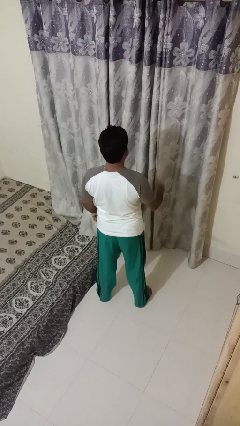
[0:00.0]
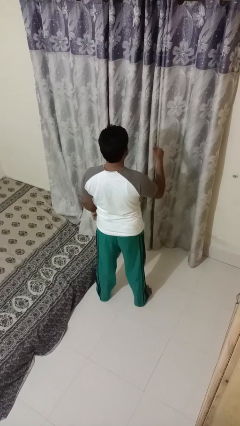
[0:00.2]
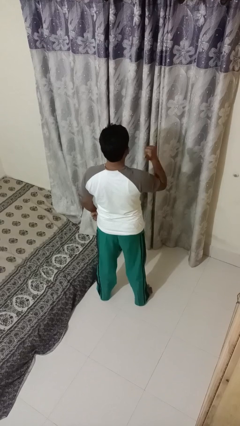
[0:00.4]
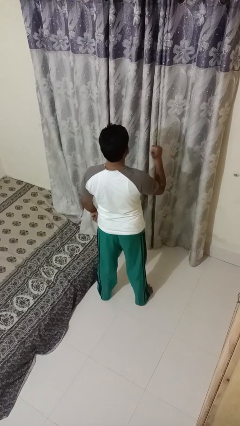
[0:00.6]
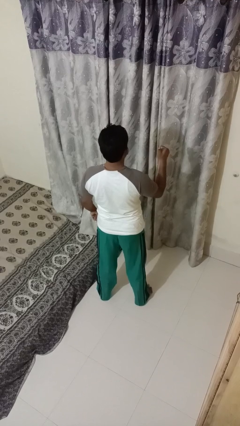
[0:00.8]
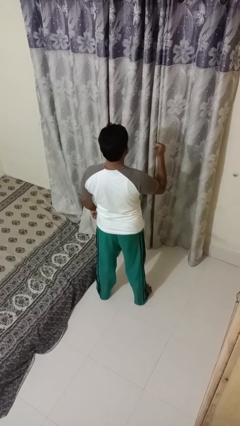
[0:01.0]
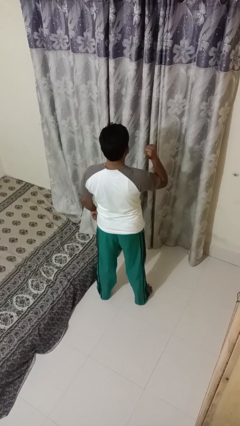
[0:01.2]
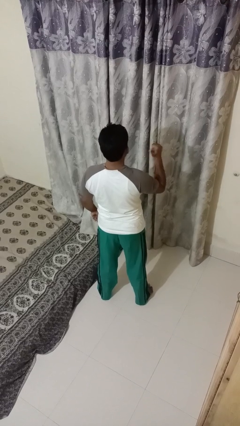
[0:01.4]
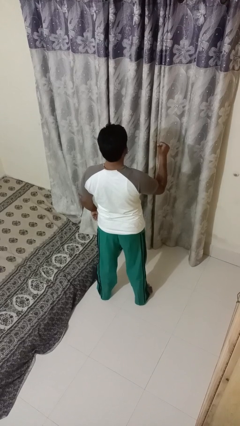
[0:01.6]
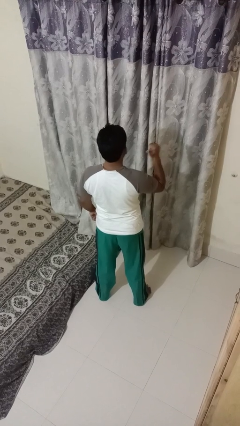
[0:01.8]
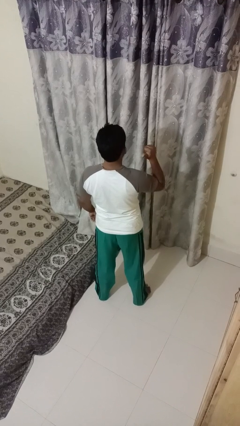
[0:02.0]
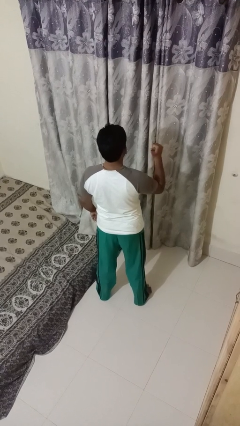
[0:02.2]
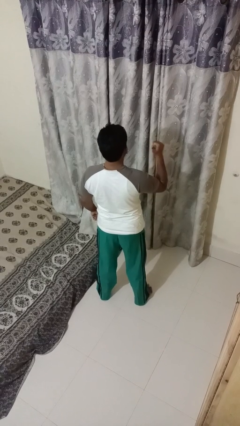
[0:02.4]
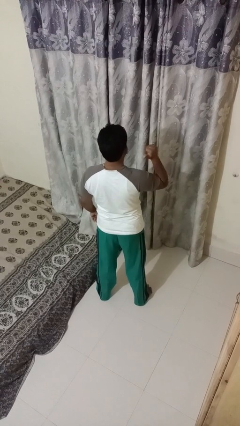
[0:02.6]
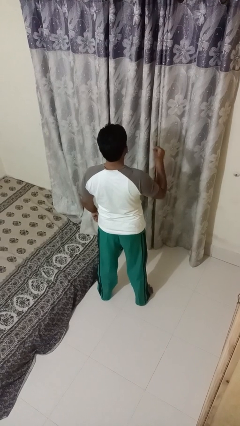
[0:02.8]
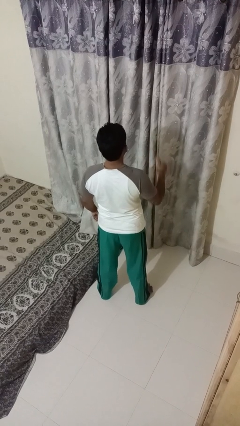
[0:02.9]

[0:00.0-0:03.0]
person gestures behind me

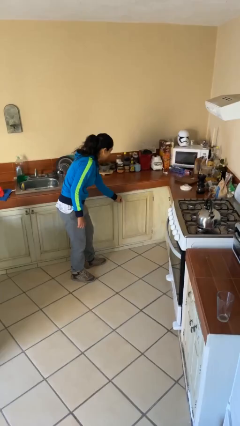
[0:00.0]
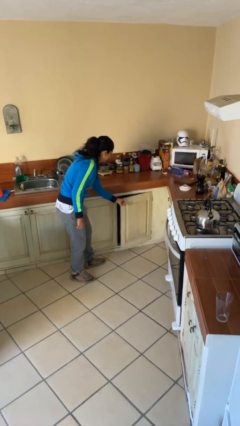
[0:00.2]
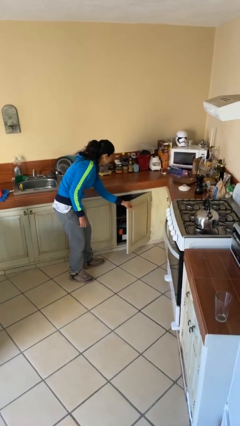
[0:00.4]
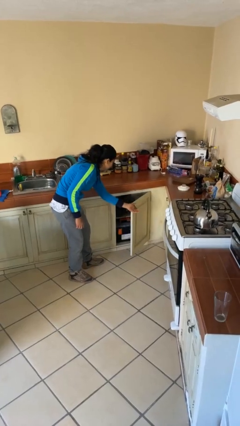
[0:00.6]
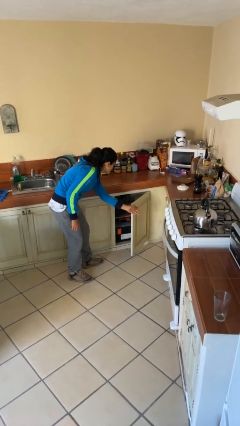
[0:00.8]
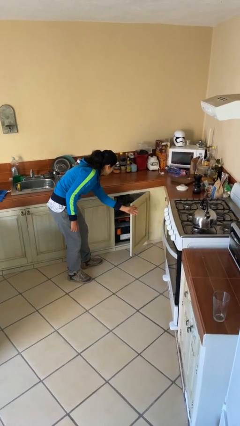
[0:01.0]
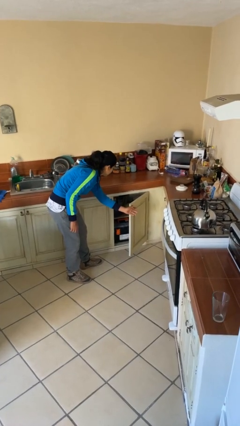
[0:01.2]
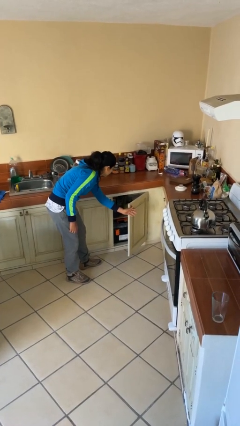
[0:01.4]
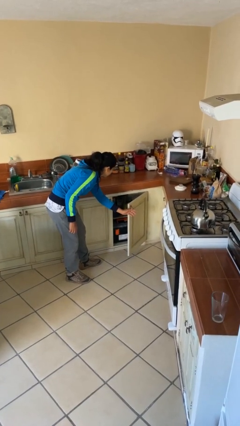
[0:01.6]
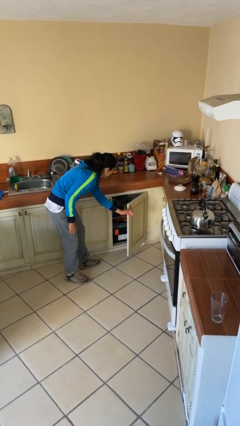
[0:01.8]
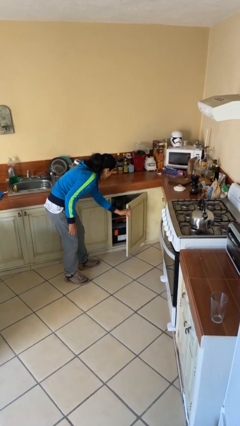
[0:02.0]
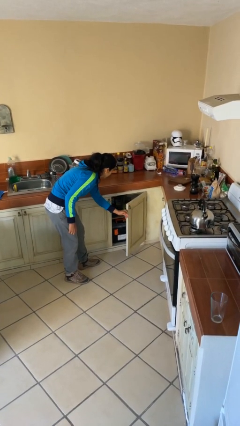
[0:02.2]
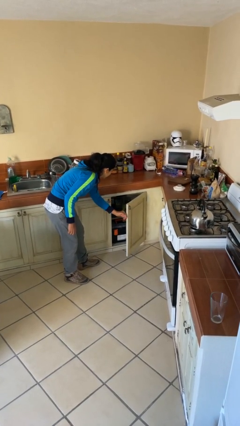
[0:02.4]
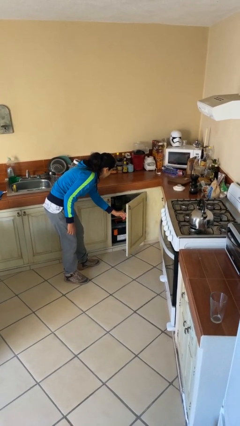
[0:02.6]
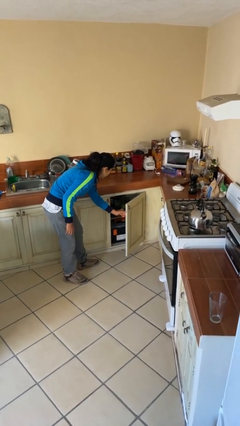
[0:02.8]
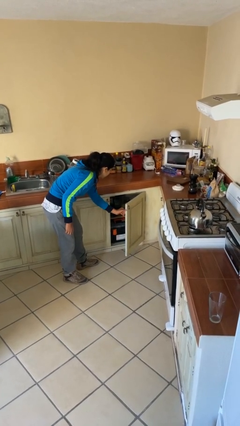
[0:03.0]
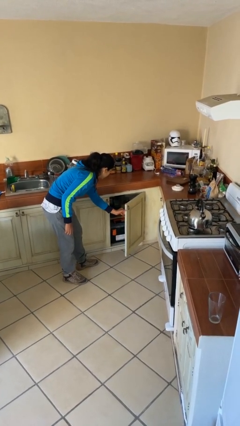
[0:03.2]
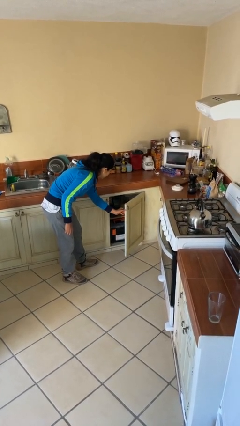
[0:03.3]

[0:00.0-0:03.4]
person opens cabinet

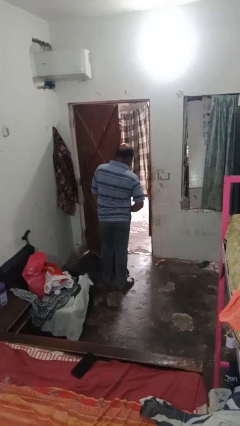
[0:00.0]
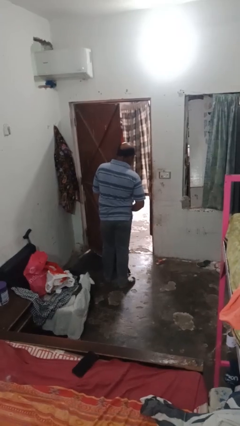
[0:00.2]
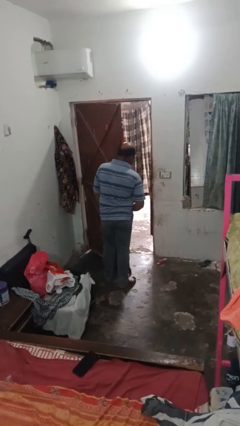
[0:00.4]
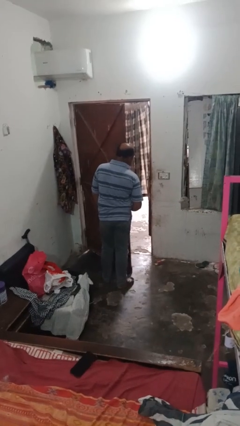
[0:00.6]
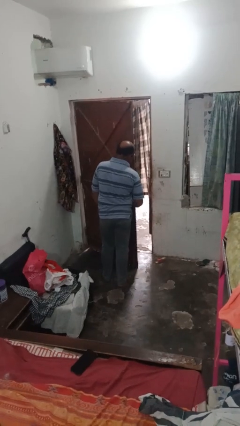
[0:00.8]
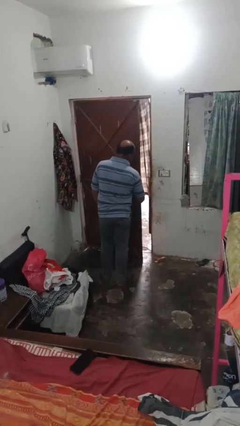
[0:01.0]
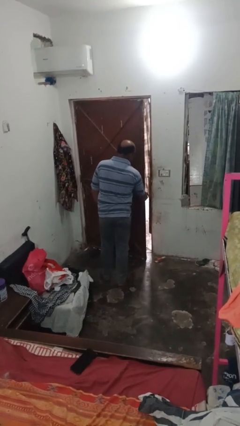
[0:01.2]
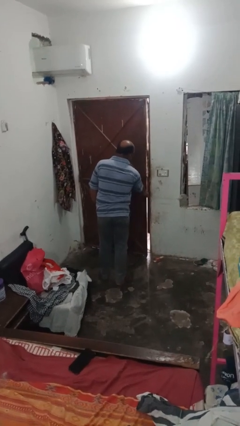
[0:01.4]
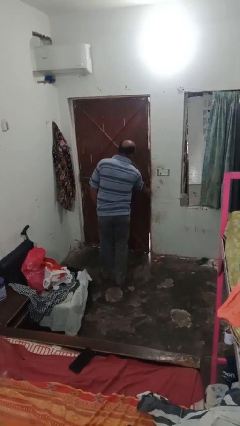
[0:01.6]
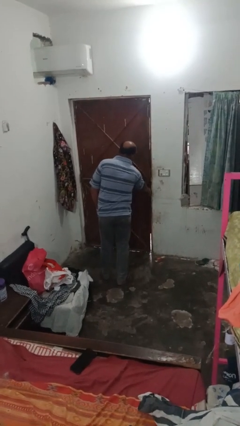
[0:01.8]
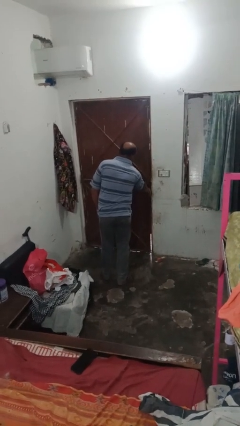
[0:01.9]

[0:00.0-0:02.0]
person closes closet door

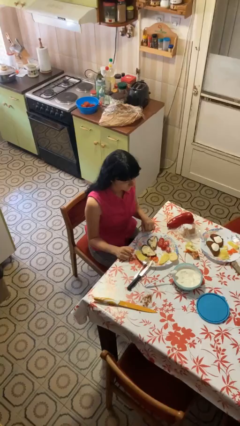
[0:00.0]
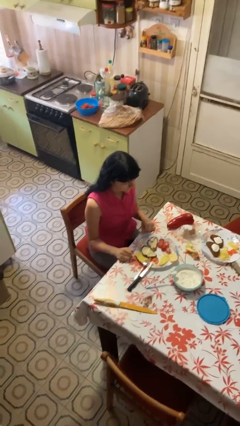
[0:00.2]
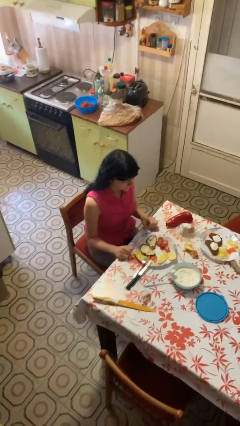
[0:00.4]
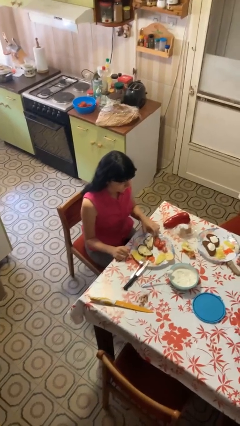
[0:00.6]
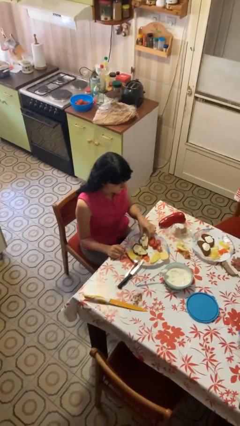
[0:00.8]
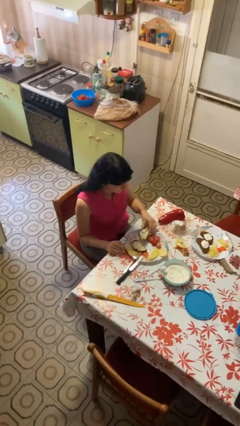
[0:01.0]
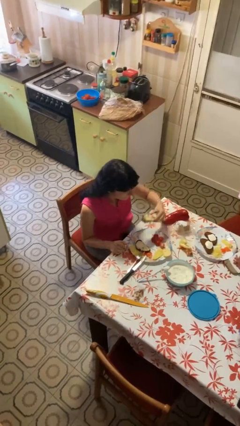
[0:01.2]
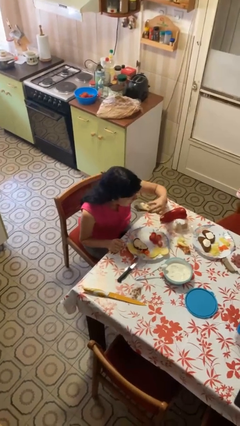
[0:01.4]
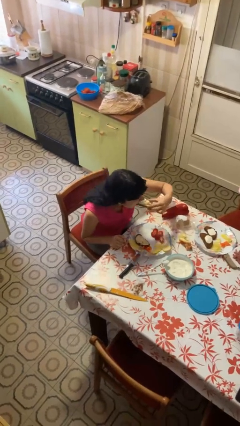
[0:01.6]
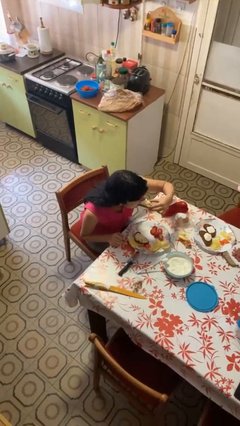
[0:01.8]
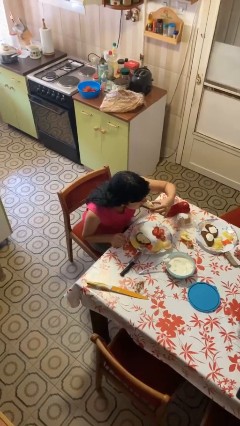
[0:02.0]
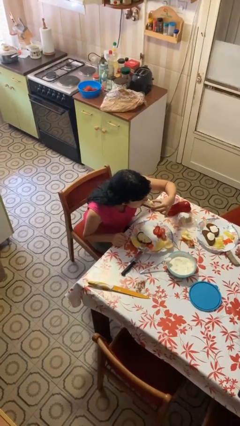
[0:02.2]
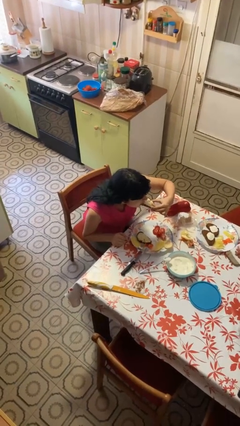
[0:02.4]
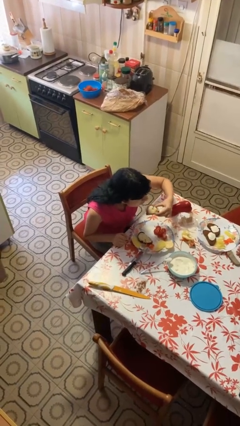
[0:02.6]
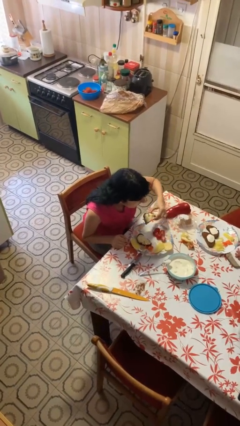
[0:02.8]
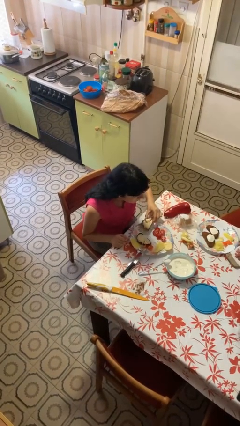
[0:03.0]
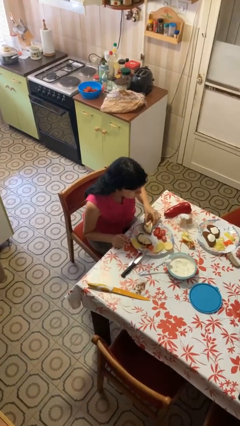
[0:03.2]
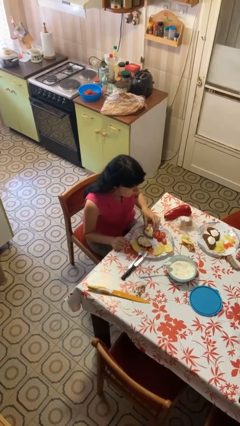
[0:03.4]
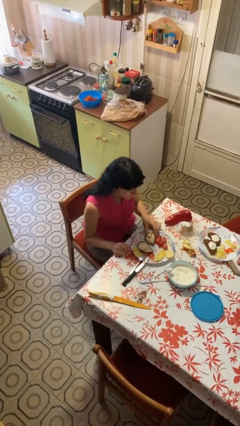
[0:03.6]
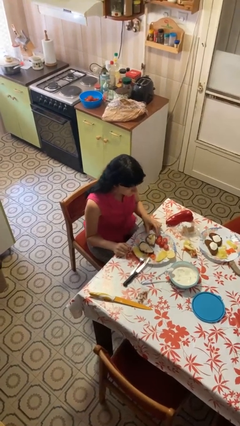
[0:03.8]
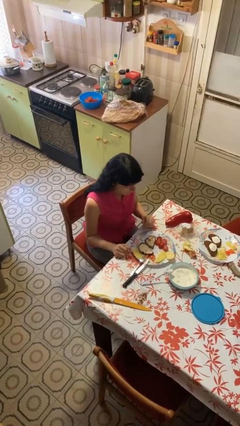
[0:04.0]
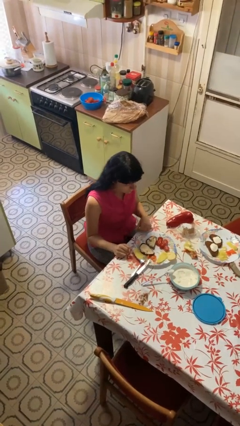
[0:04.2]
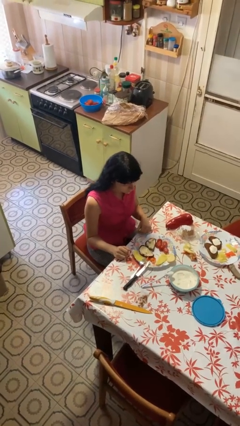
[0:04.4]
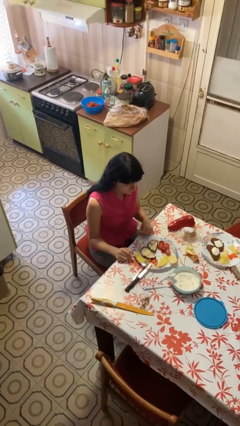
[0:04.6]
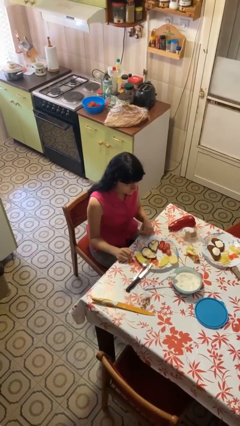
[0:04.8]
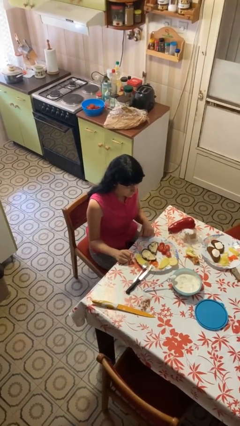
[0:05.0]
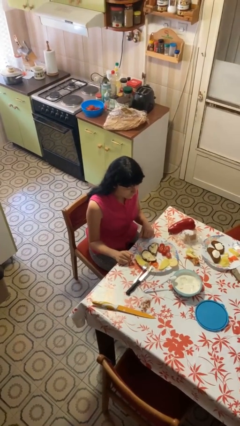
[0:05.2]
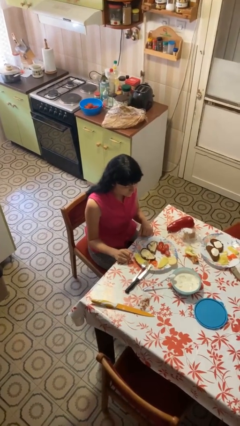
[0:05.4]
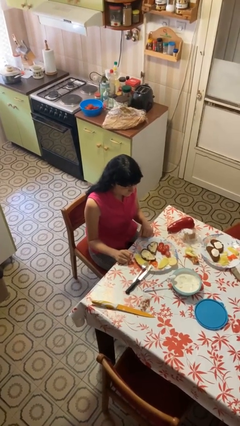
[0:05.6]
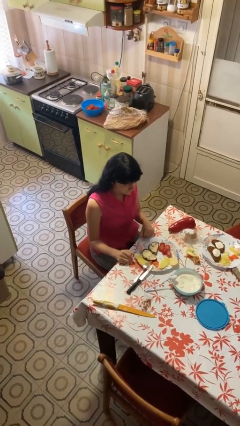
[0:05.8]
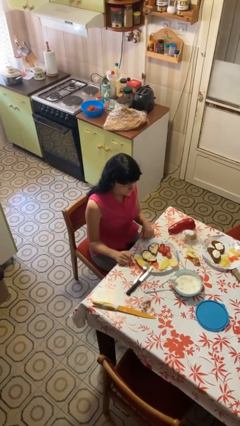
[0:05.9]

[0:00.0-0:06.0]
person eats with hands

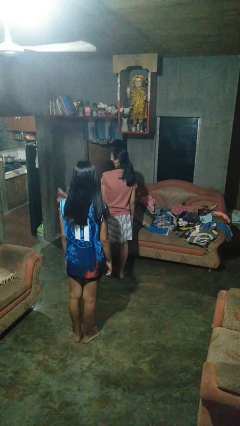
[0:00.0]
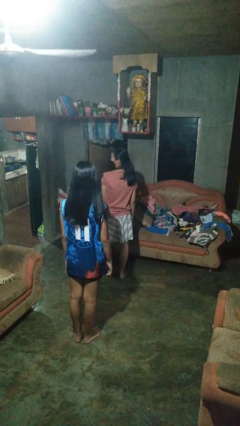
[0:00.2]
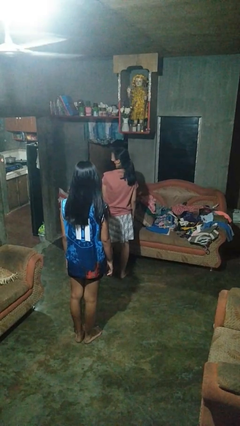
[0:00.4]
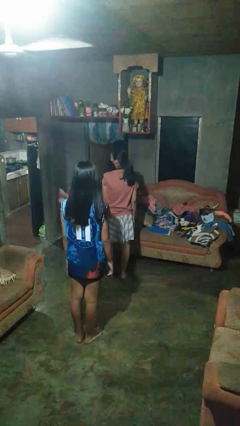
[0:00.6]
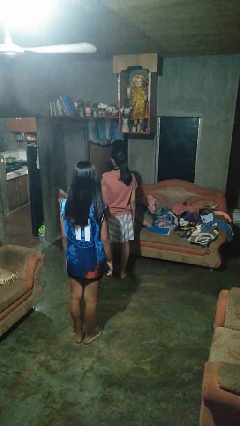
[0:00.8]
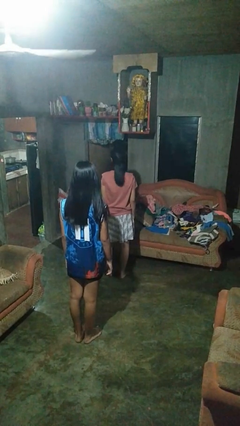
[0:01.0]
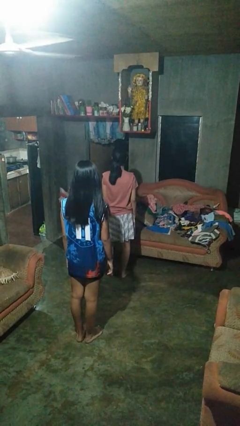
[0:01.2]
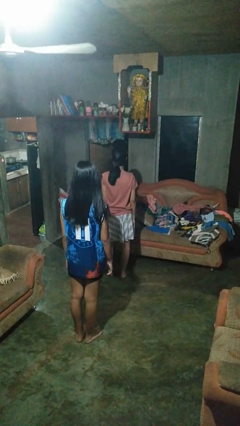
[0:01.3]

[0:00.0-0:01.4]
person looks over shoulder

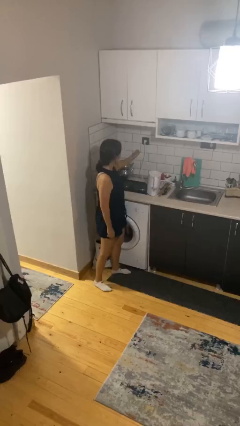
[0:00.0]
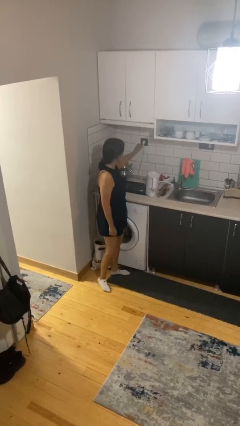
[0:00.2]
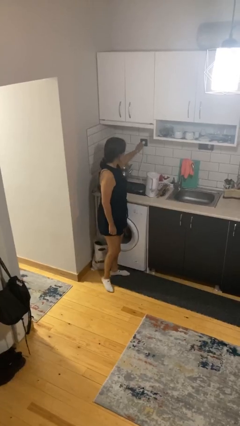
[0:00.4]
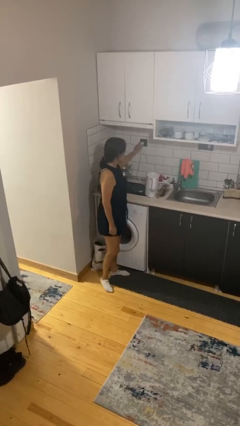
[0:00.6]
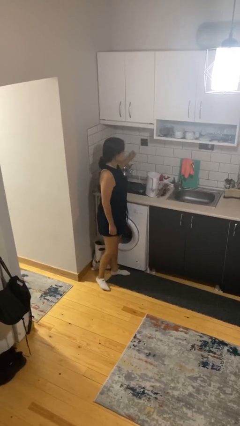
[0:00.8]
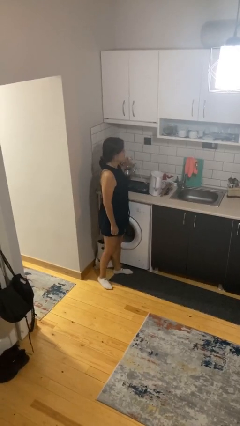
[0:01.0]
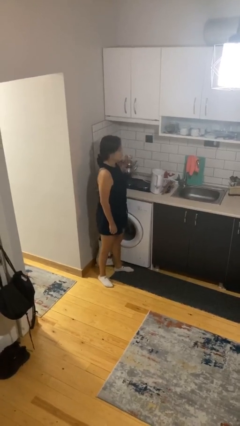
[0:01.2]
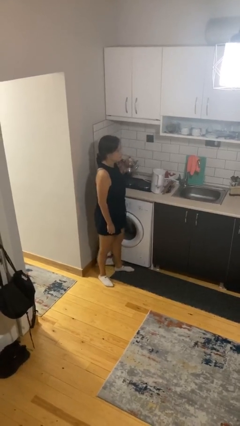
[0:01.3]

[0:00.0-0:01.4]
person unplugs from electrical socket

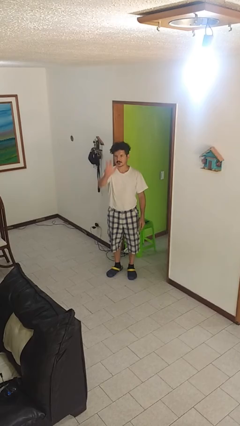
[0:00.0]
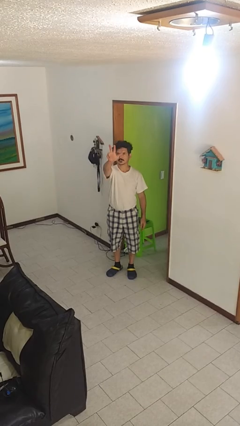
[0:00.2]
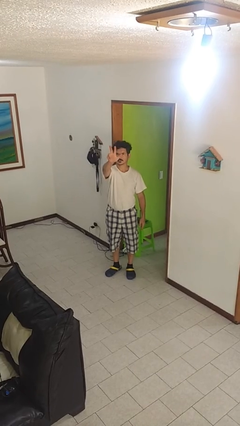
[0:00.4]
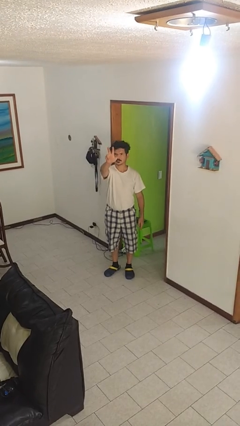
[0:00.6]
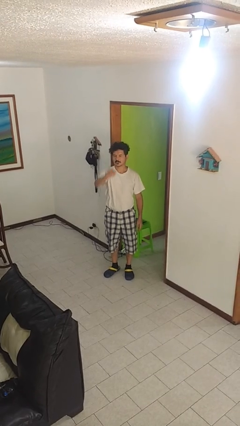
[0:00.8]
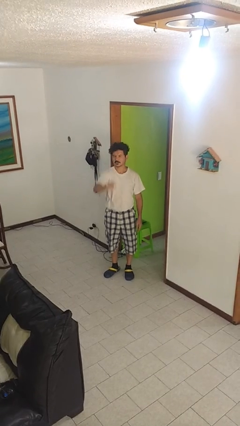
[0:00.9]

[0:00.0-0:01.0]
person gestures number three
